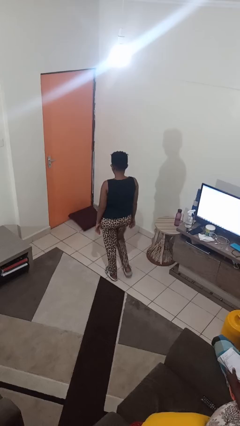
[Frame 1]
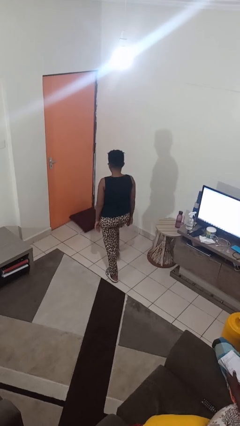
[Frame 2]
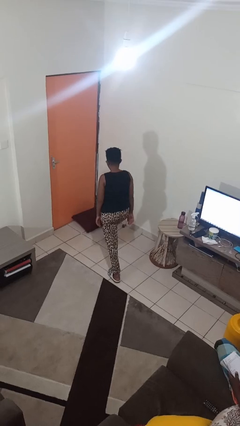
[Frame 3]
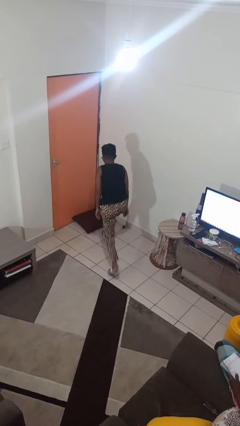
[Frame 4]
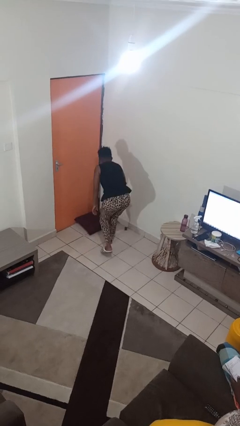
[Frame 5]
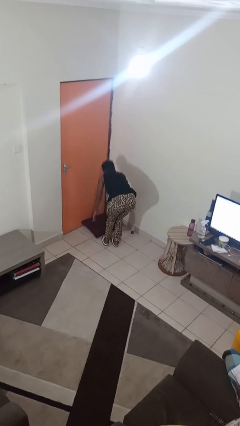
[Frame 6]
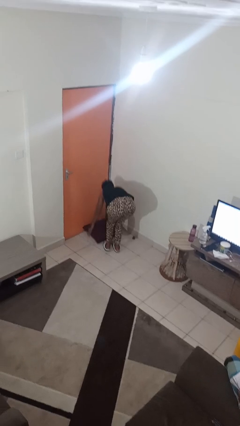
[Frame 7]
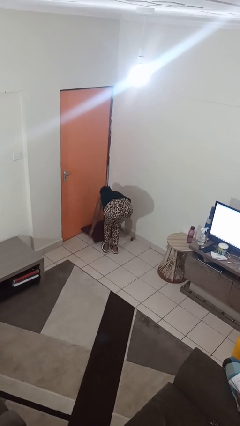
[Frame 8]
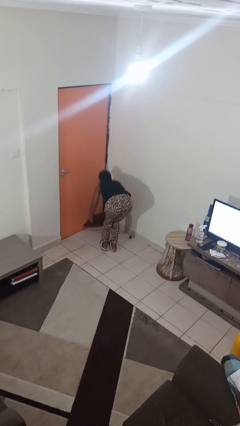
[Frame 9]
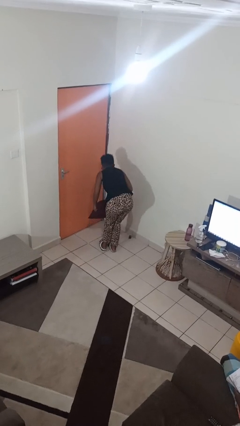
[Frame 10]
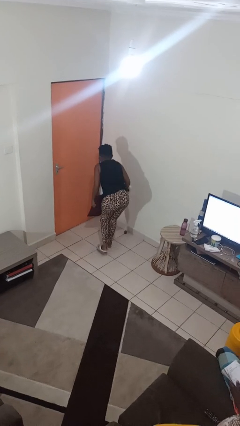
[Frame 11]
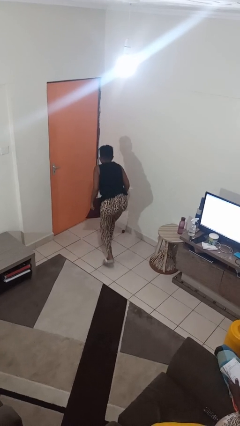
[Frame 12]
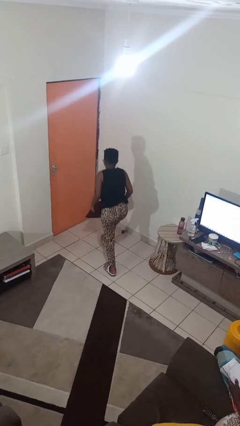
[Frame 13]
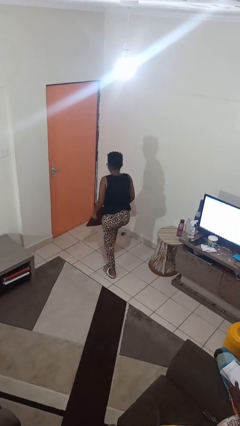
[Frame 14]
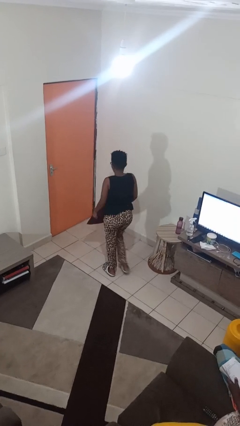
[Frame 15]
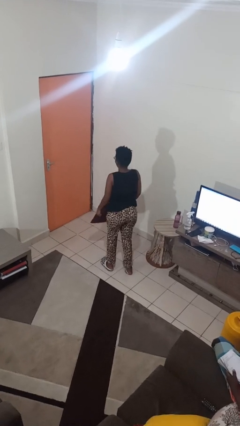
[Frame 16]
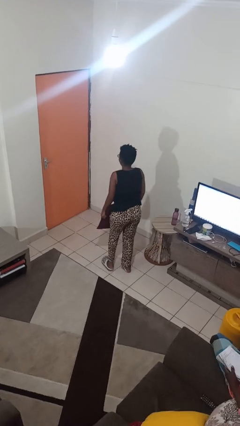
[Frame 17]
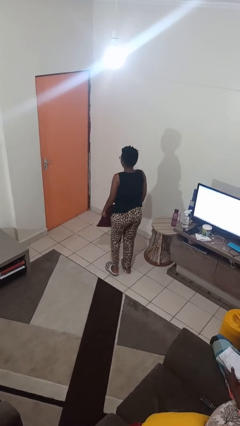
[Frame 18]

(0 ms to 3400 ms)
person picks up object from floor

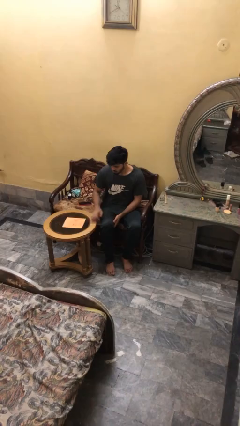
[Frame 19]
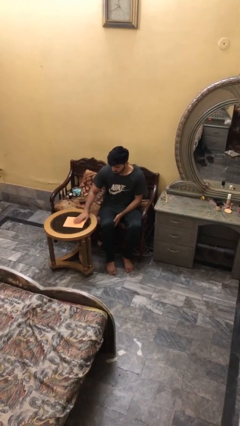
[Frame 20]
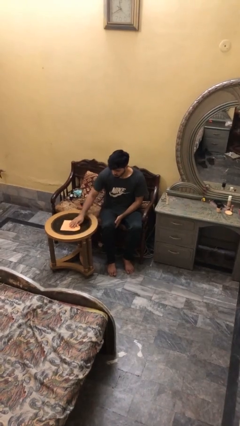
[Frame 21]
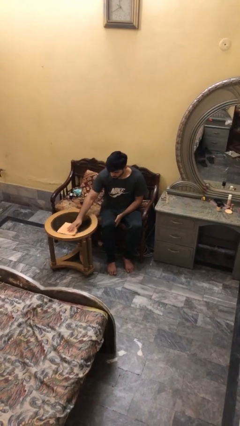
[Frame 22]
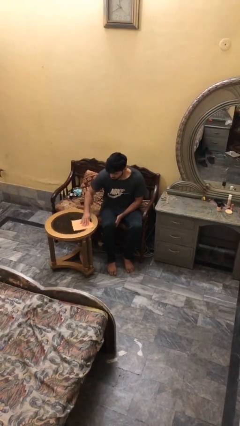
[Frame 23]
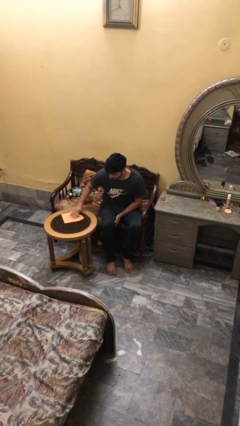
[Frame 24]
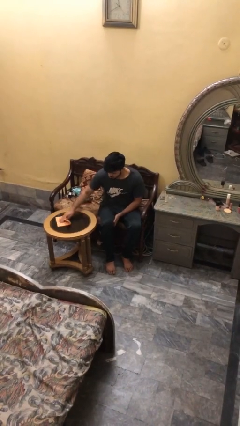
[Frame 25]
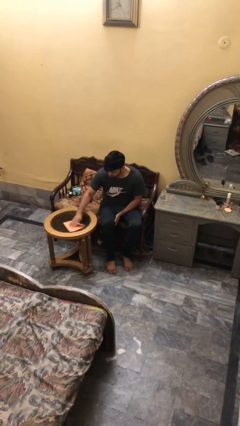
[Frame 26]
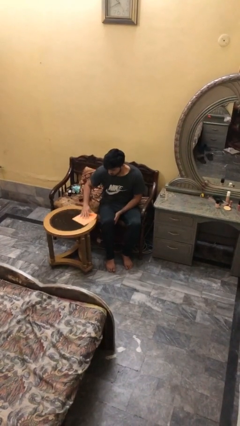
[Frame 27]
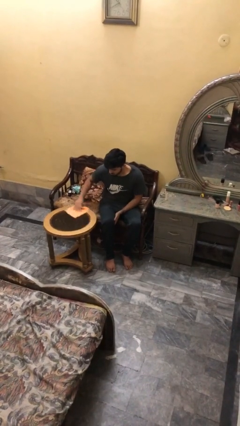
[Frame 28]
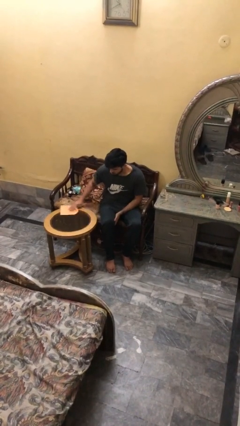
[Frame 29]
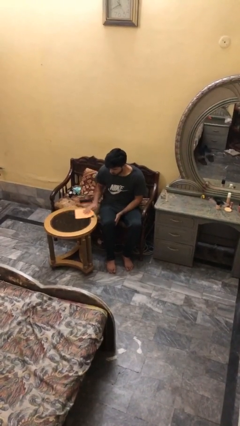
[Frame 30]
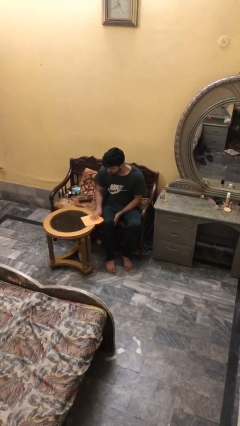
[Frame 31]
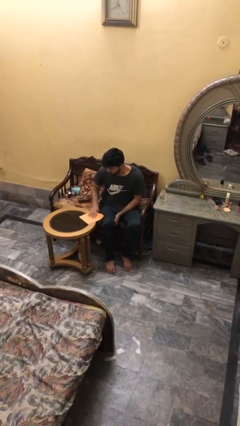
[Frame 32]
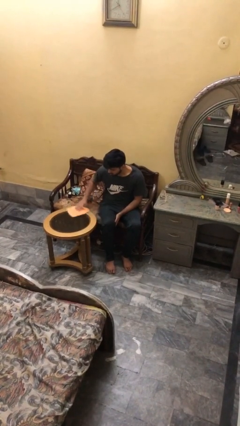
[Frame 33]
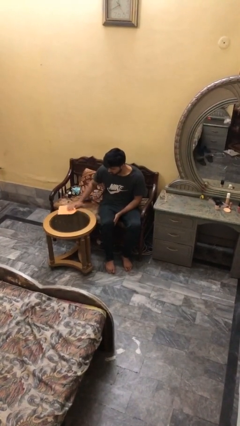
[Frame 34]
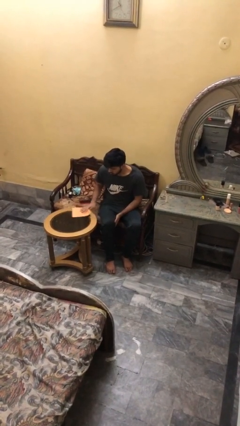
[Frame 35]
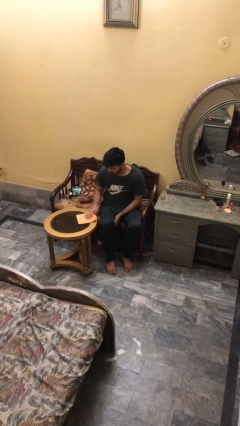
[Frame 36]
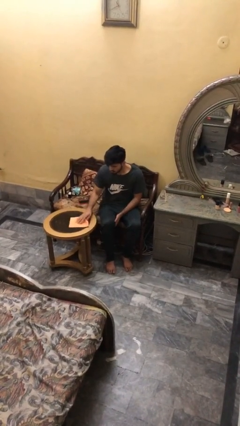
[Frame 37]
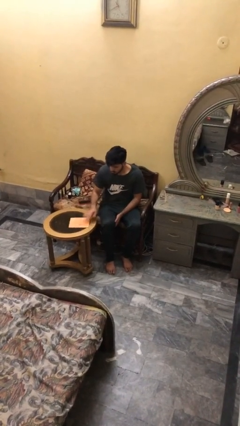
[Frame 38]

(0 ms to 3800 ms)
person cleans table with rag

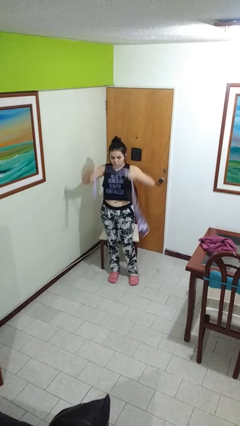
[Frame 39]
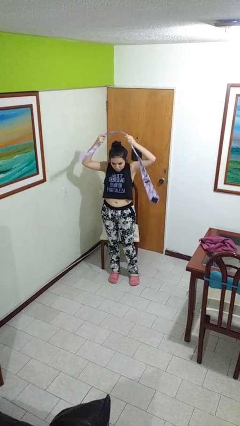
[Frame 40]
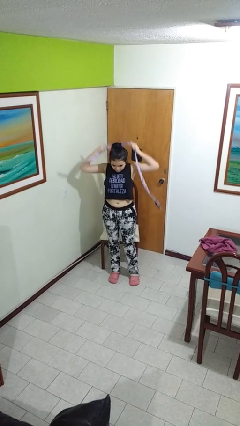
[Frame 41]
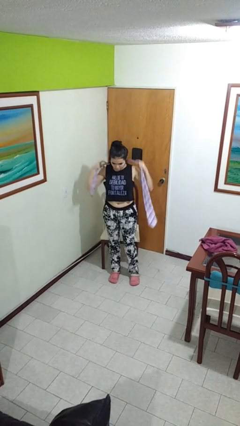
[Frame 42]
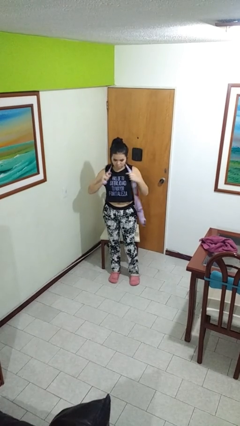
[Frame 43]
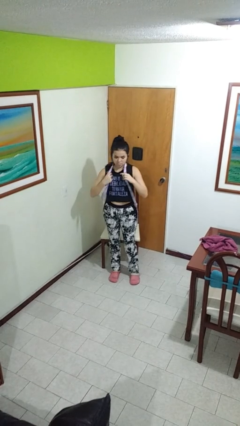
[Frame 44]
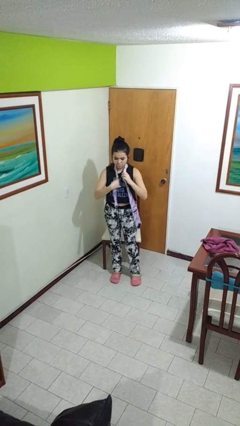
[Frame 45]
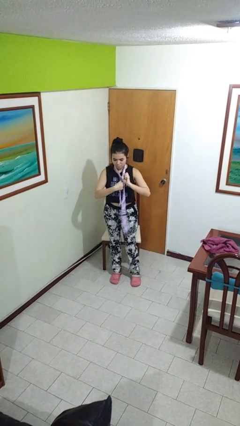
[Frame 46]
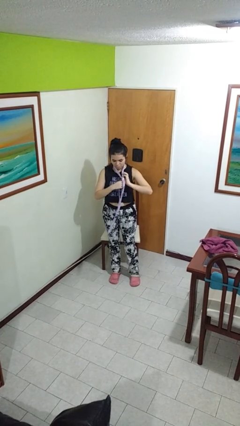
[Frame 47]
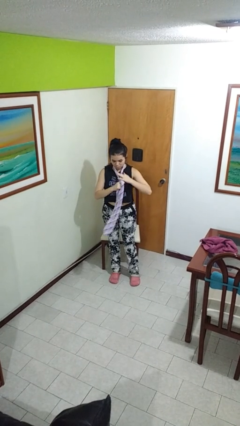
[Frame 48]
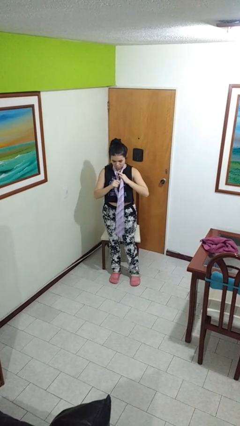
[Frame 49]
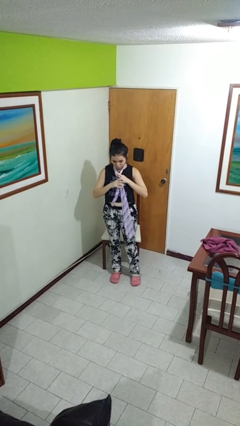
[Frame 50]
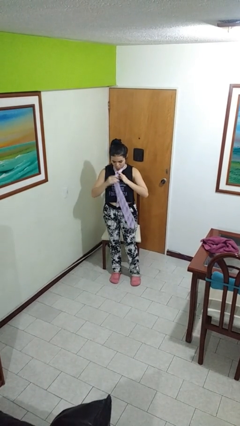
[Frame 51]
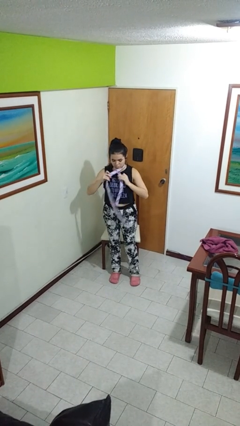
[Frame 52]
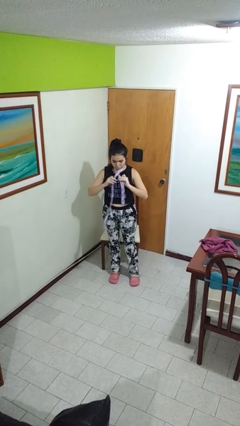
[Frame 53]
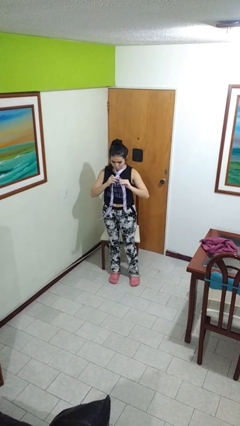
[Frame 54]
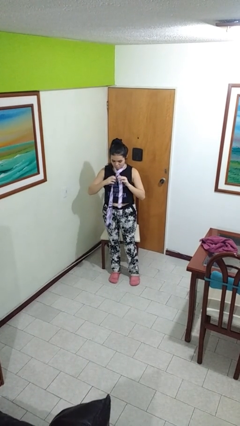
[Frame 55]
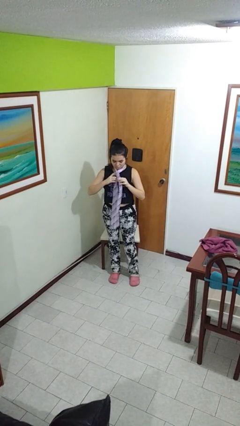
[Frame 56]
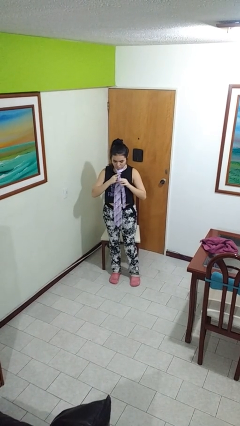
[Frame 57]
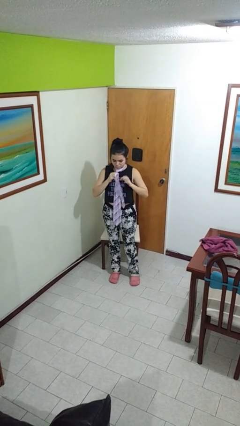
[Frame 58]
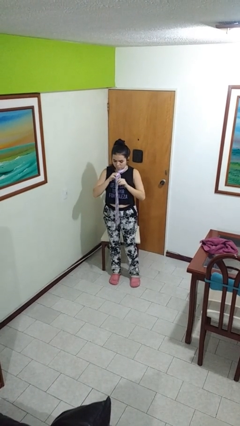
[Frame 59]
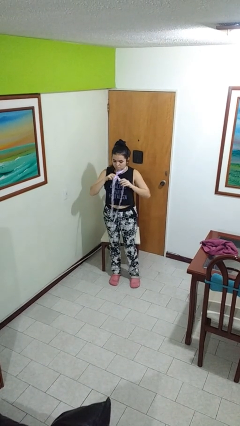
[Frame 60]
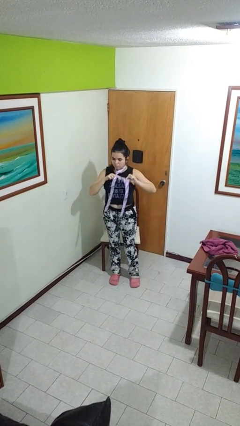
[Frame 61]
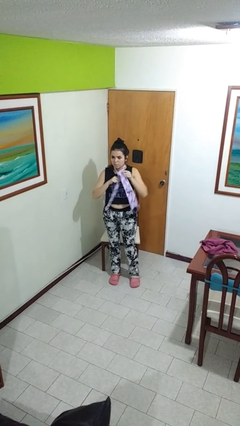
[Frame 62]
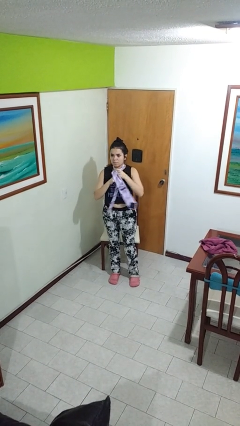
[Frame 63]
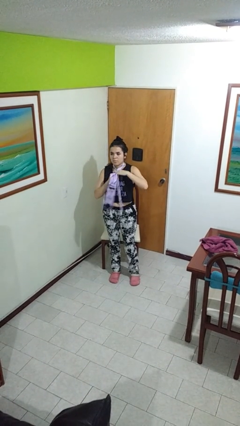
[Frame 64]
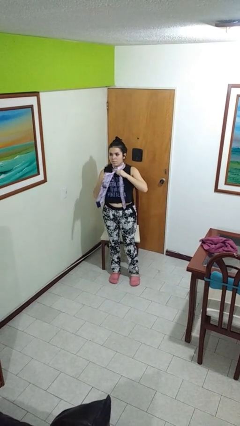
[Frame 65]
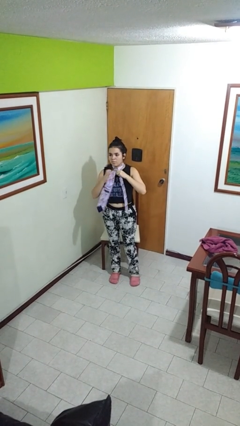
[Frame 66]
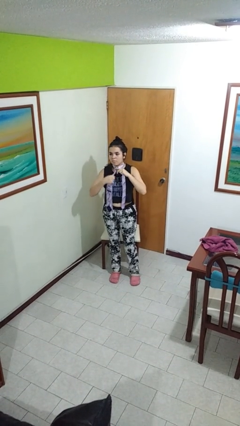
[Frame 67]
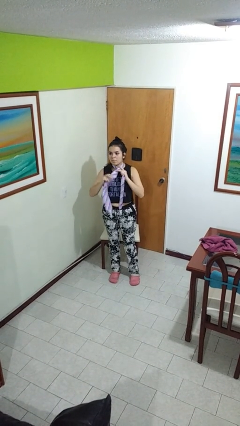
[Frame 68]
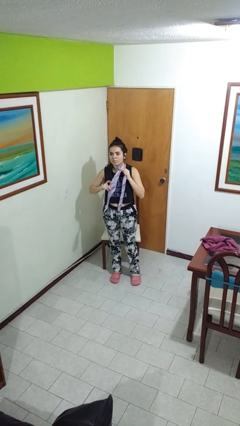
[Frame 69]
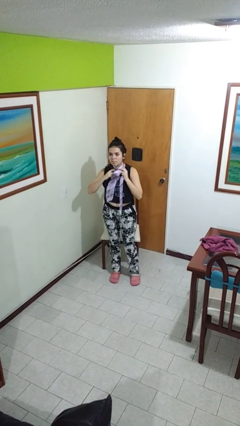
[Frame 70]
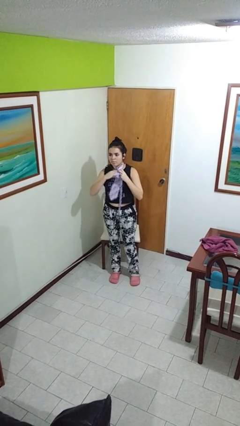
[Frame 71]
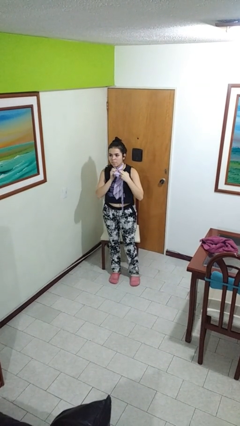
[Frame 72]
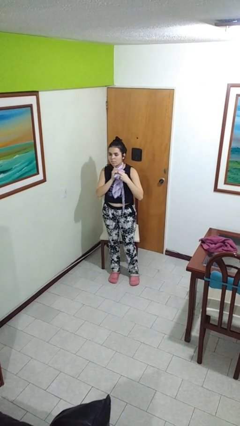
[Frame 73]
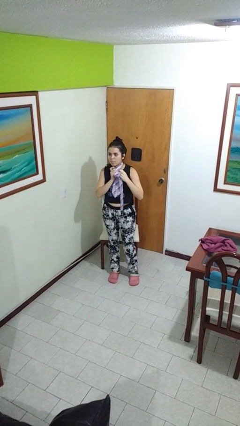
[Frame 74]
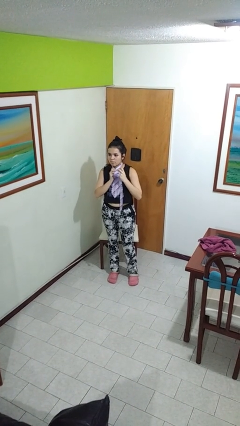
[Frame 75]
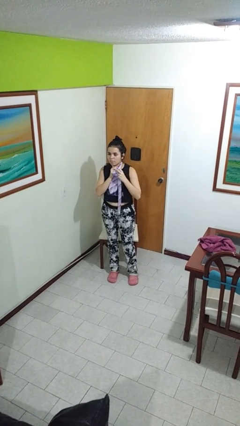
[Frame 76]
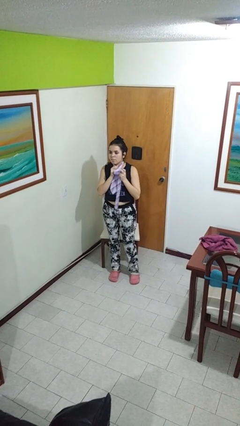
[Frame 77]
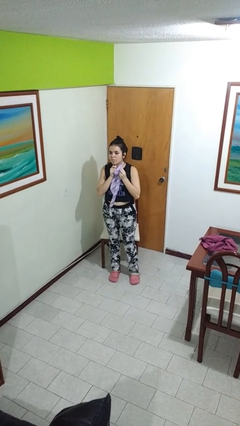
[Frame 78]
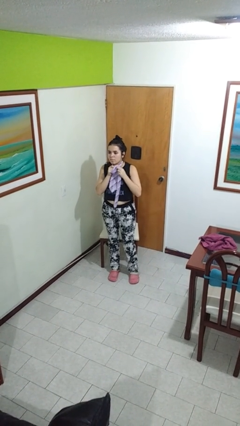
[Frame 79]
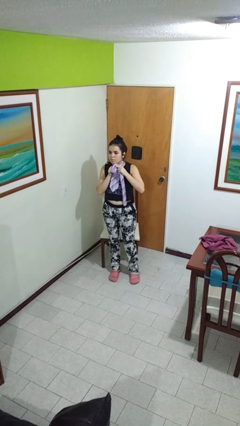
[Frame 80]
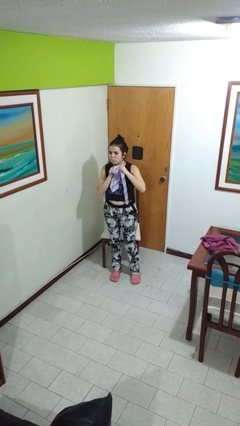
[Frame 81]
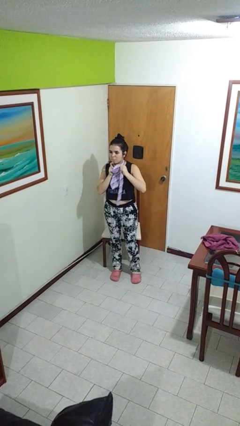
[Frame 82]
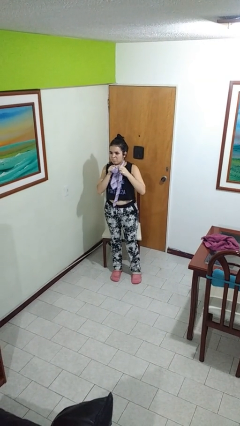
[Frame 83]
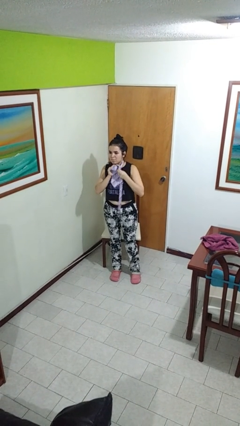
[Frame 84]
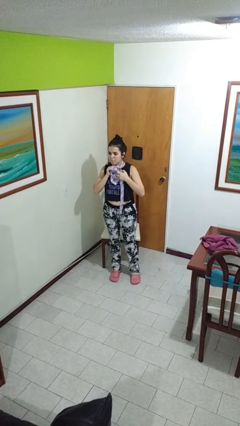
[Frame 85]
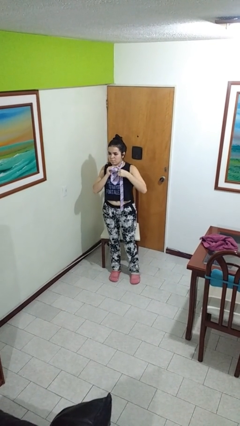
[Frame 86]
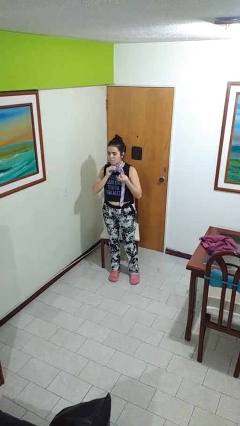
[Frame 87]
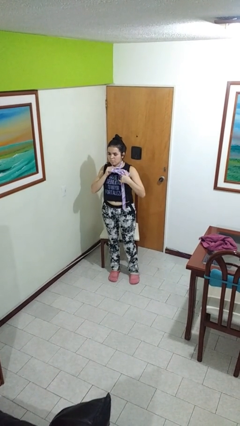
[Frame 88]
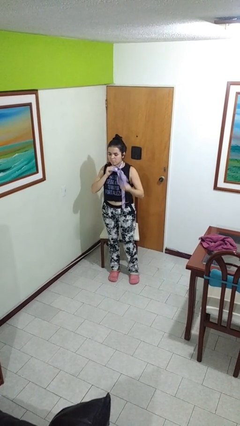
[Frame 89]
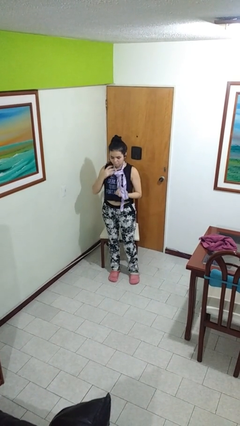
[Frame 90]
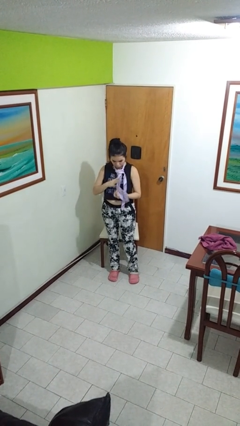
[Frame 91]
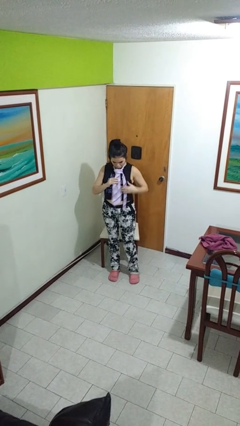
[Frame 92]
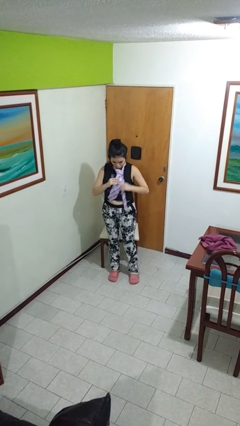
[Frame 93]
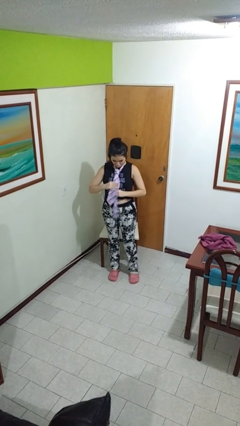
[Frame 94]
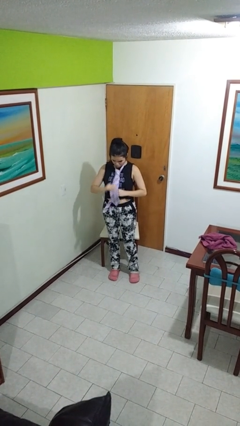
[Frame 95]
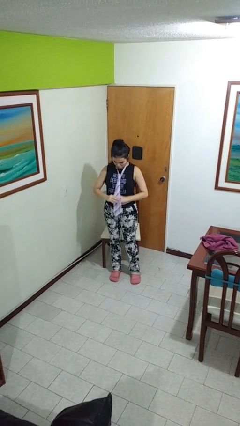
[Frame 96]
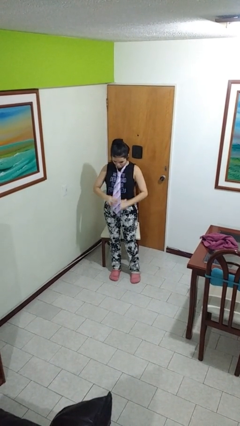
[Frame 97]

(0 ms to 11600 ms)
person puts on necktie
